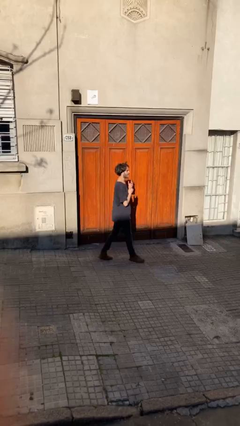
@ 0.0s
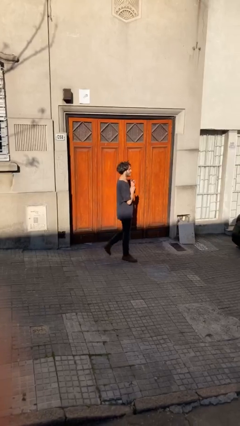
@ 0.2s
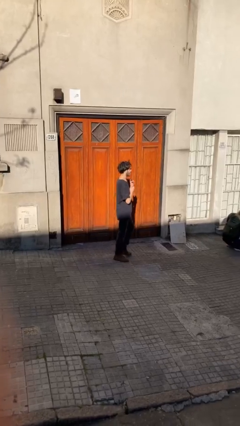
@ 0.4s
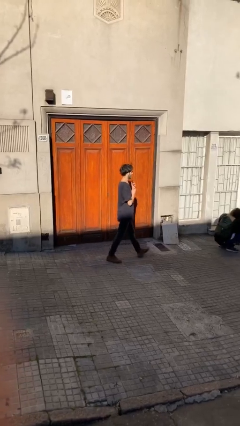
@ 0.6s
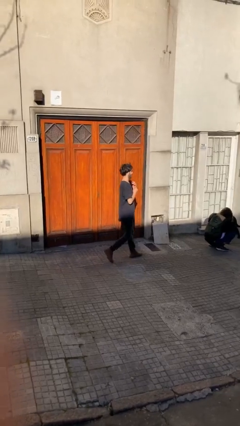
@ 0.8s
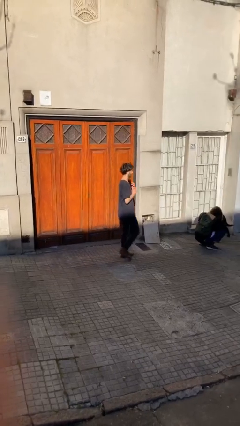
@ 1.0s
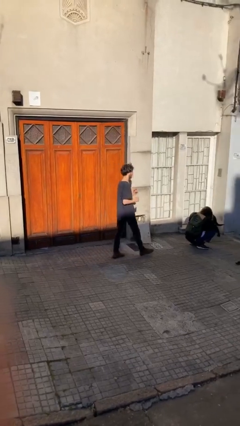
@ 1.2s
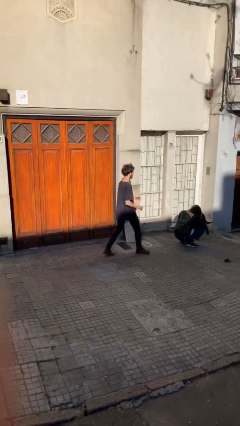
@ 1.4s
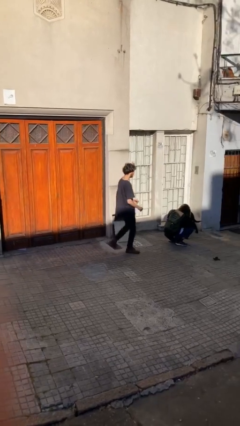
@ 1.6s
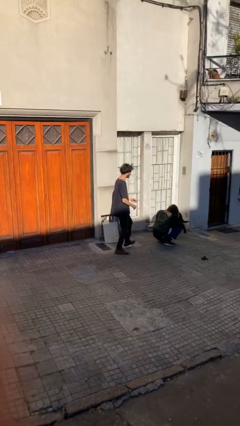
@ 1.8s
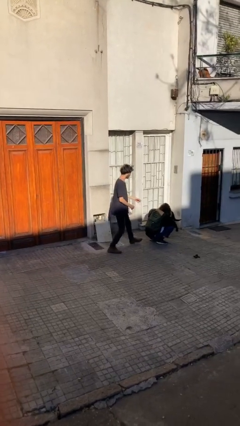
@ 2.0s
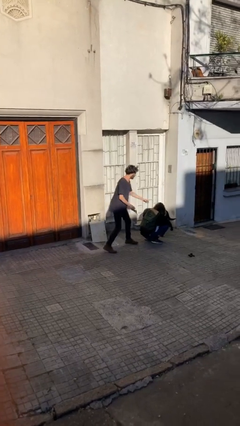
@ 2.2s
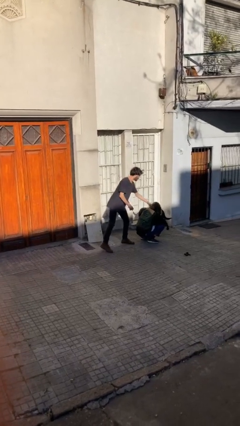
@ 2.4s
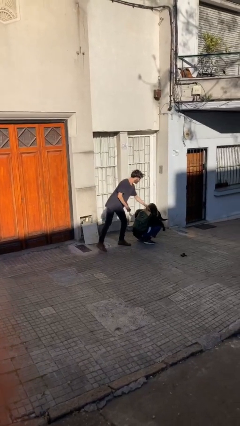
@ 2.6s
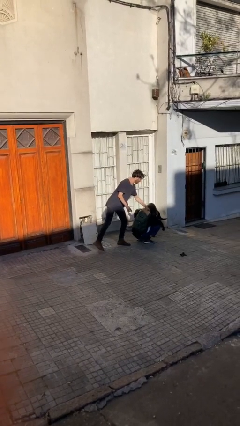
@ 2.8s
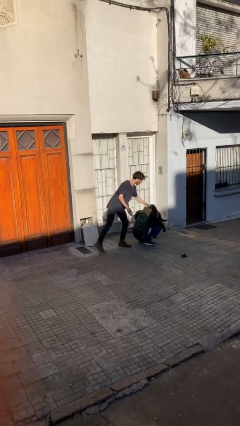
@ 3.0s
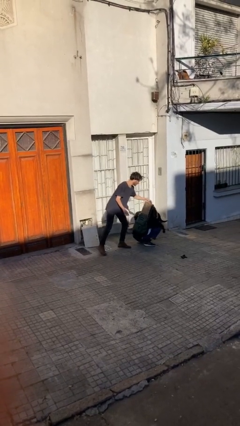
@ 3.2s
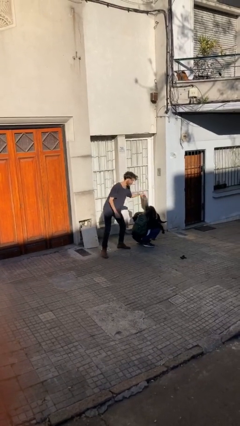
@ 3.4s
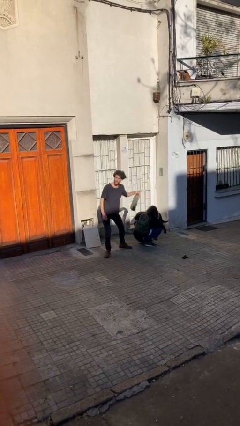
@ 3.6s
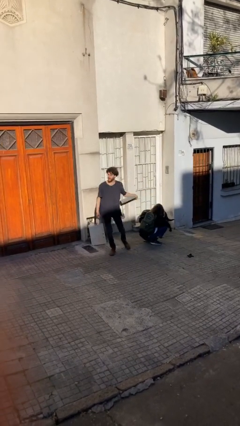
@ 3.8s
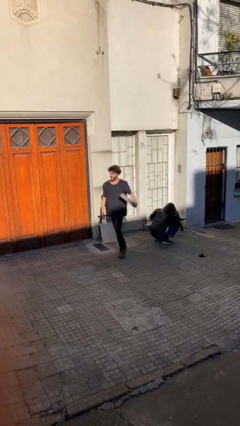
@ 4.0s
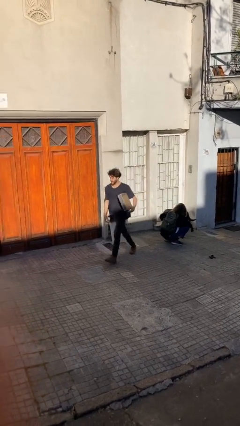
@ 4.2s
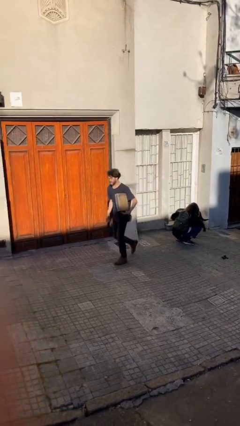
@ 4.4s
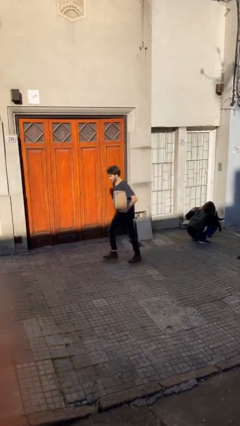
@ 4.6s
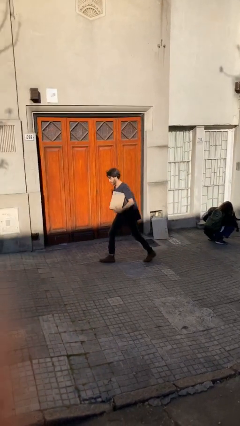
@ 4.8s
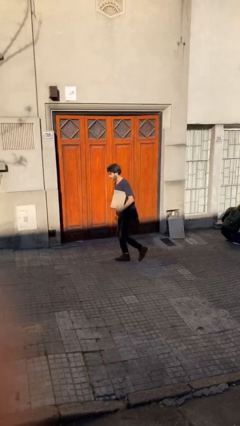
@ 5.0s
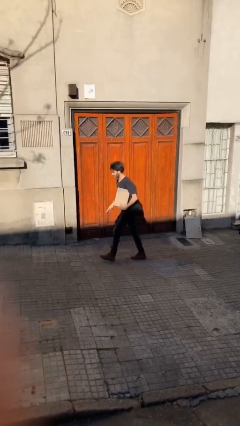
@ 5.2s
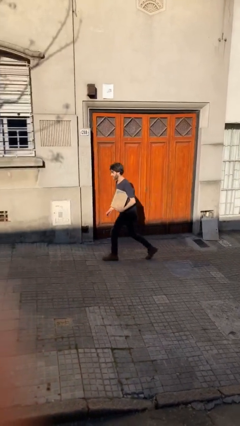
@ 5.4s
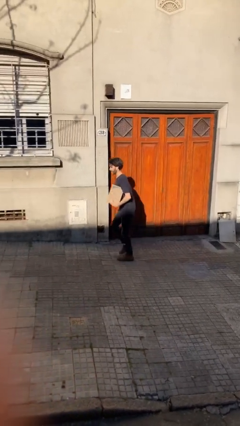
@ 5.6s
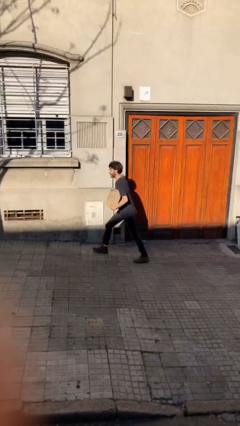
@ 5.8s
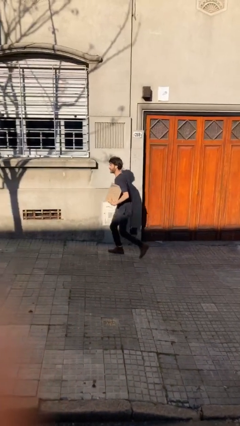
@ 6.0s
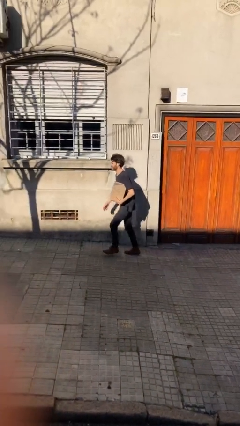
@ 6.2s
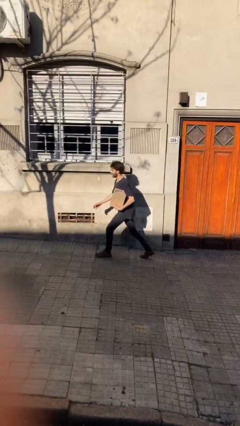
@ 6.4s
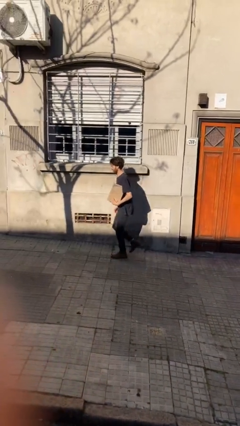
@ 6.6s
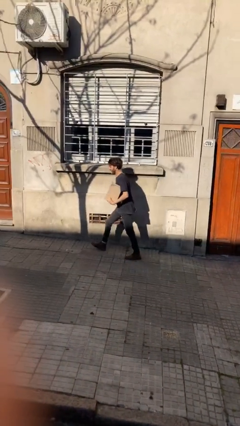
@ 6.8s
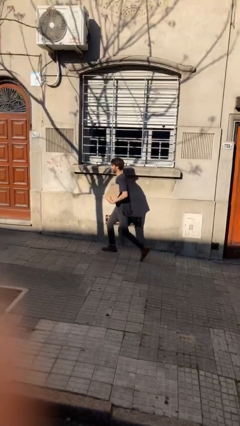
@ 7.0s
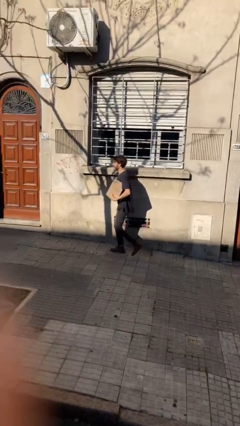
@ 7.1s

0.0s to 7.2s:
person steals object from person

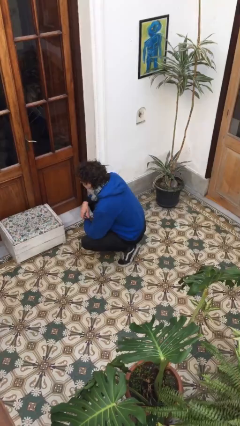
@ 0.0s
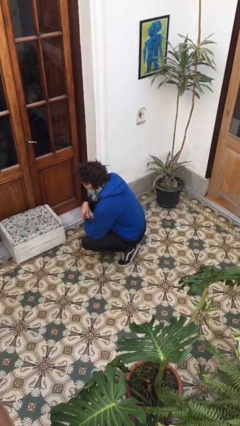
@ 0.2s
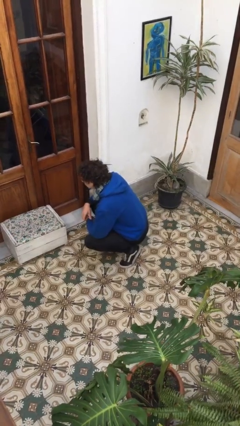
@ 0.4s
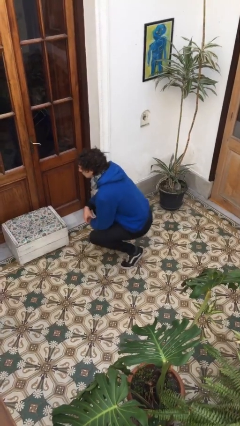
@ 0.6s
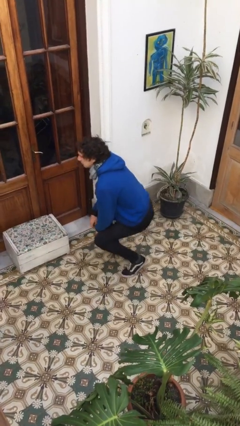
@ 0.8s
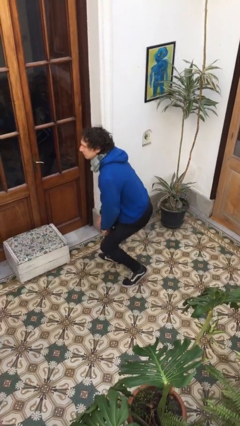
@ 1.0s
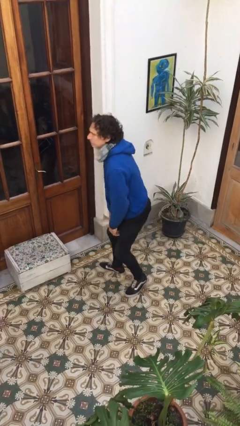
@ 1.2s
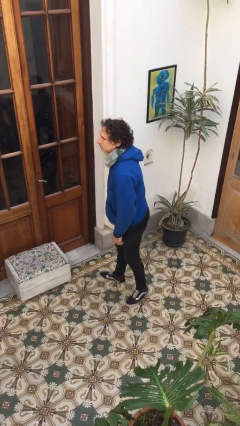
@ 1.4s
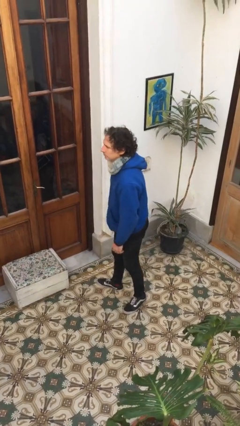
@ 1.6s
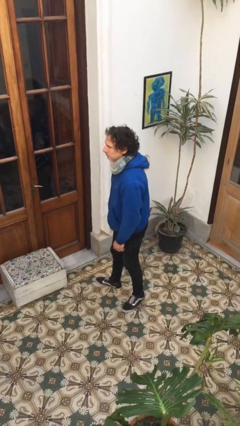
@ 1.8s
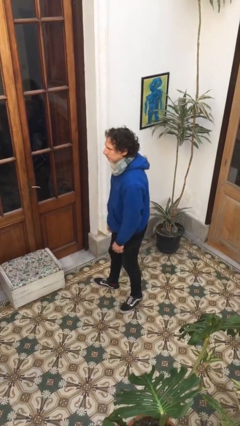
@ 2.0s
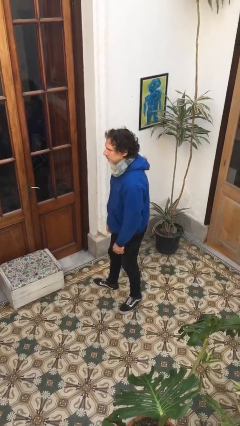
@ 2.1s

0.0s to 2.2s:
person stands up

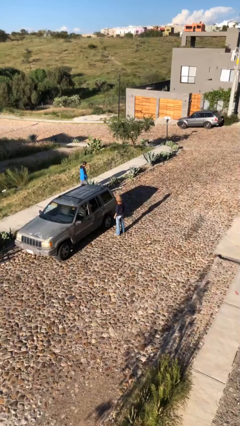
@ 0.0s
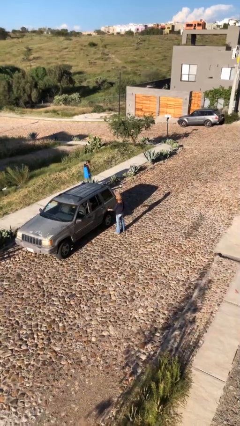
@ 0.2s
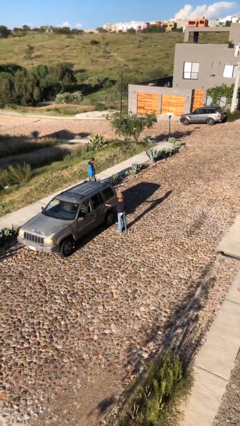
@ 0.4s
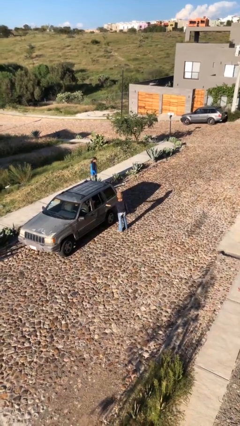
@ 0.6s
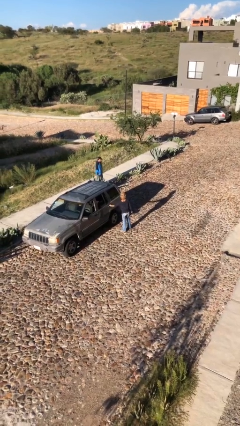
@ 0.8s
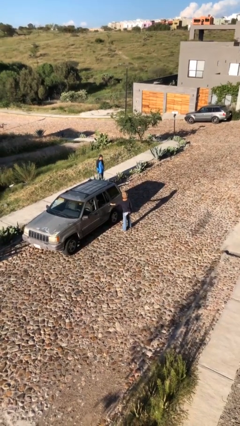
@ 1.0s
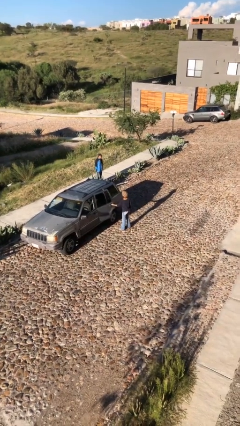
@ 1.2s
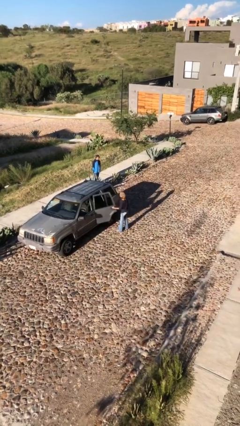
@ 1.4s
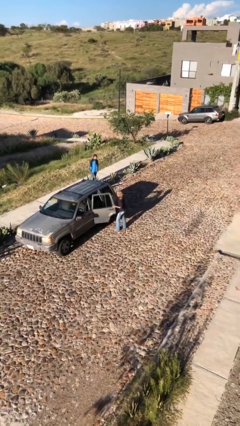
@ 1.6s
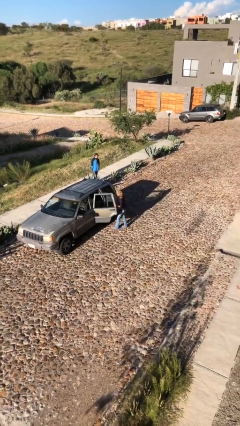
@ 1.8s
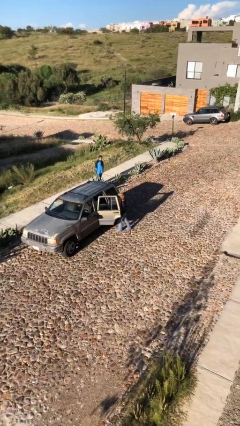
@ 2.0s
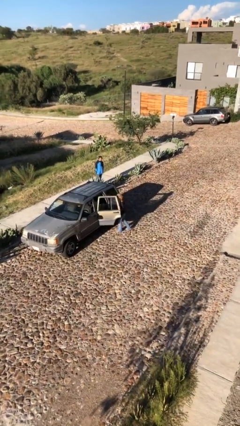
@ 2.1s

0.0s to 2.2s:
person opens car door

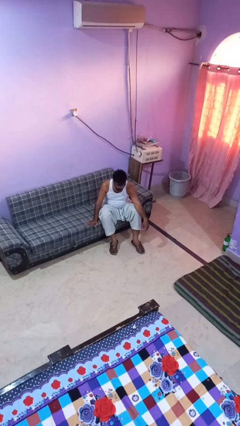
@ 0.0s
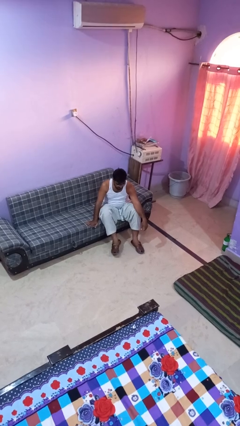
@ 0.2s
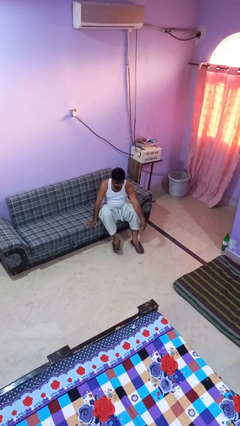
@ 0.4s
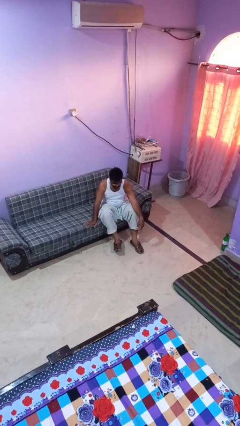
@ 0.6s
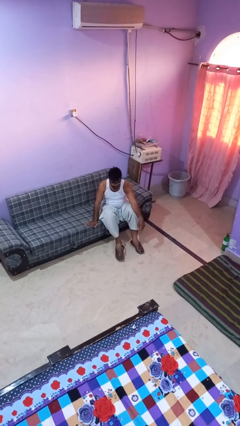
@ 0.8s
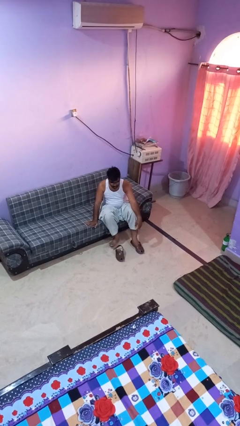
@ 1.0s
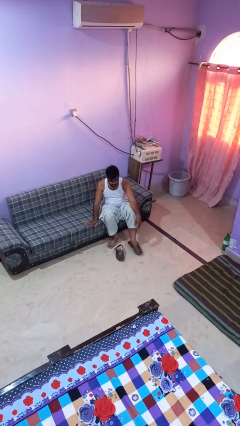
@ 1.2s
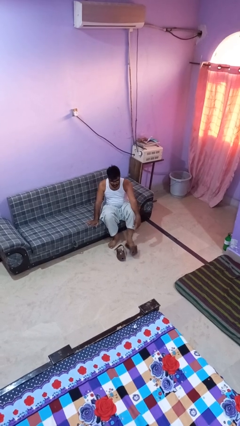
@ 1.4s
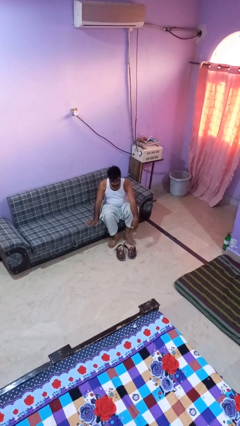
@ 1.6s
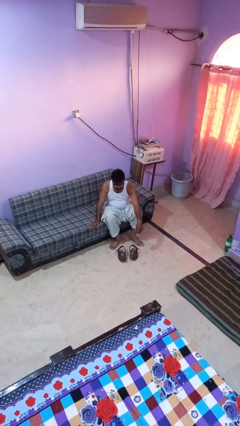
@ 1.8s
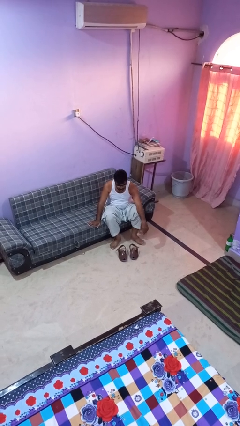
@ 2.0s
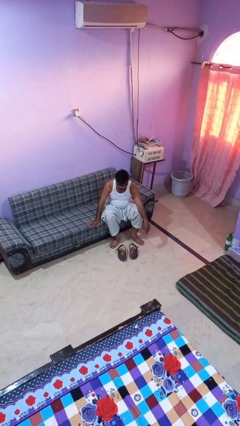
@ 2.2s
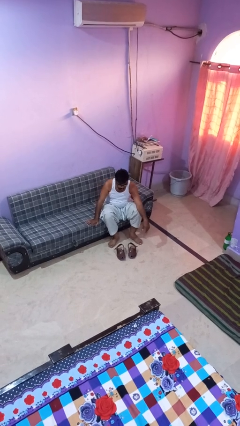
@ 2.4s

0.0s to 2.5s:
person takes off shoes

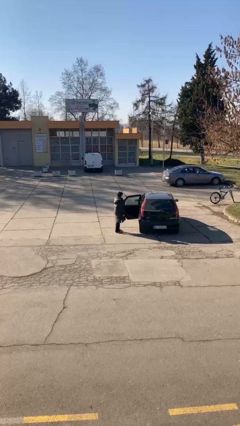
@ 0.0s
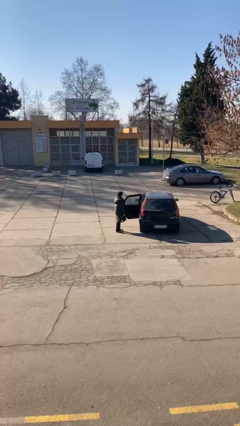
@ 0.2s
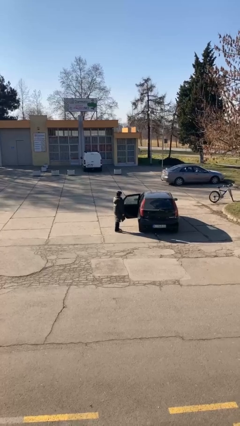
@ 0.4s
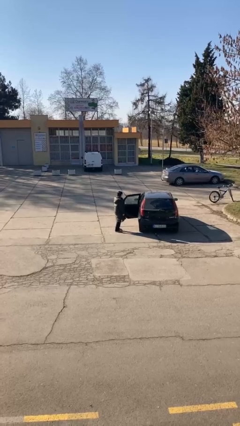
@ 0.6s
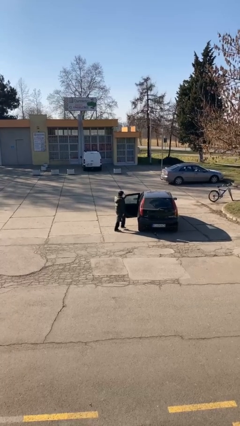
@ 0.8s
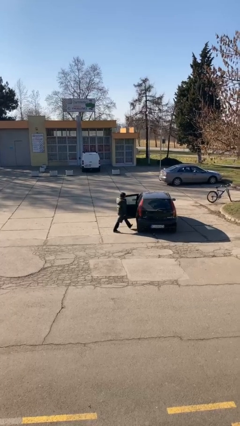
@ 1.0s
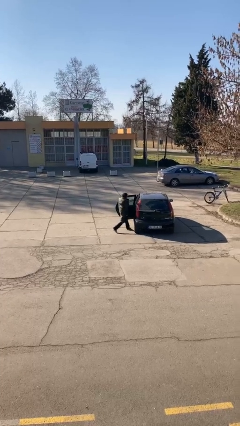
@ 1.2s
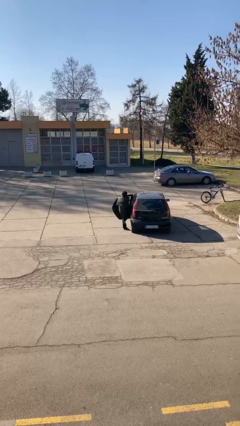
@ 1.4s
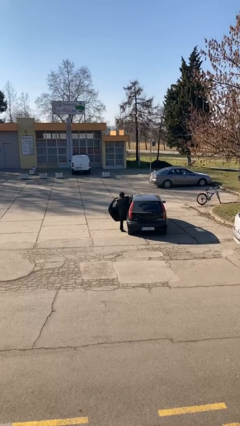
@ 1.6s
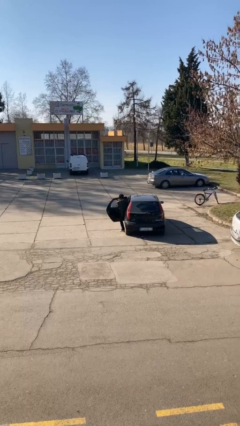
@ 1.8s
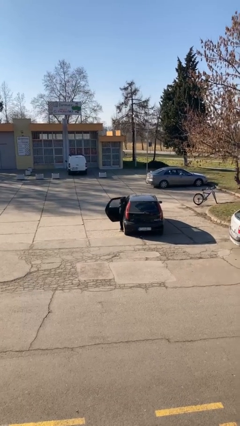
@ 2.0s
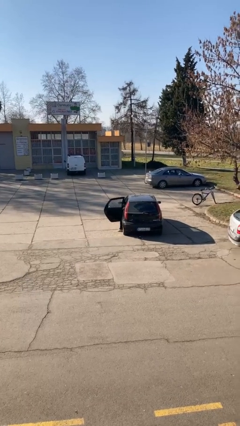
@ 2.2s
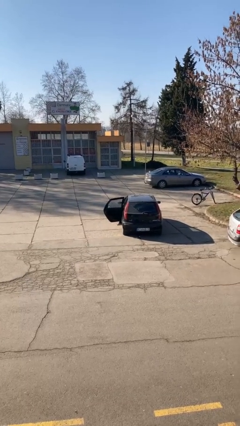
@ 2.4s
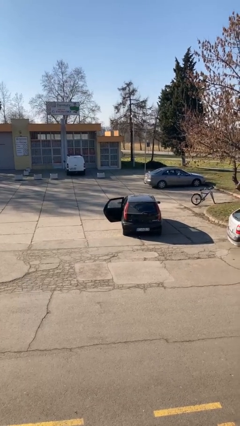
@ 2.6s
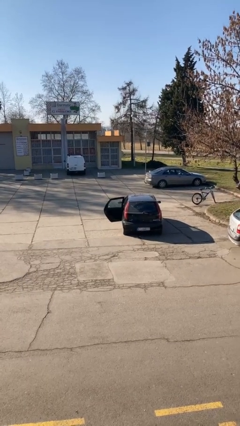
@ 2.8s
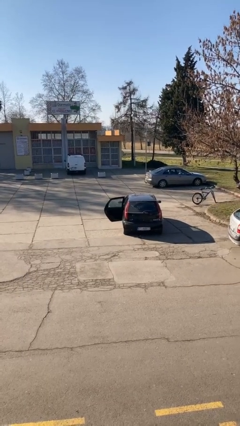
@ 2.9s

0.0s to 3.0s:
person enters car

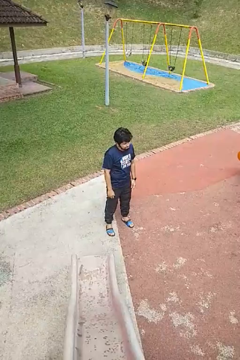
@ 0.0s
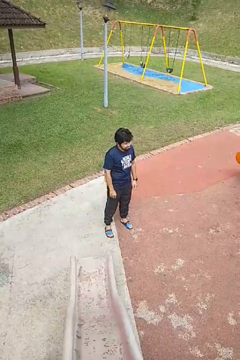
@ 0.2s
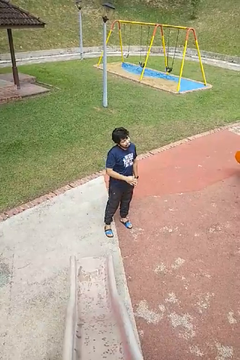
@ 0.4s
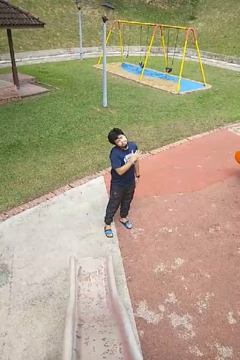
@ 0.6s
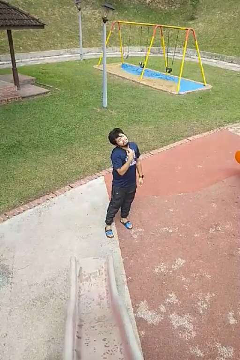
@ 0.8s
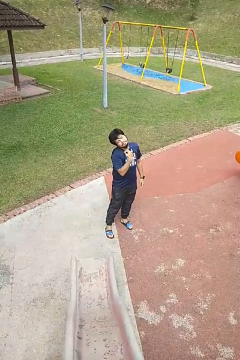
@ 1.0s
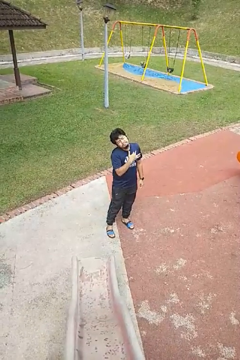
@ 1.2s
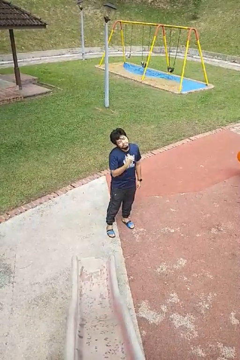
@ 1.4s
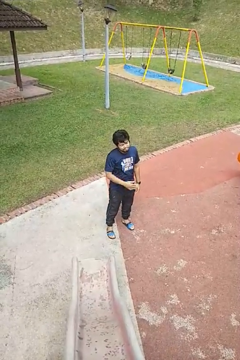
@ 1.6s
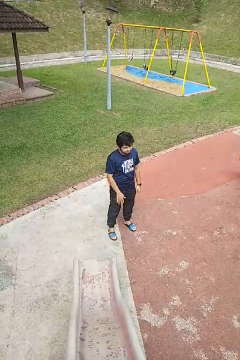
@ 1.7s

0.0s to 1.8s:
person gestures cut
